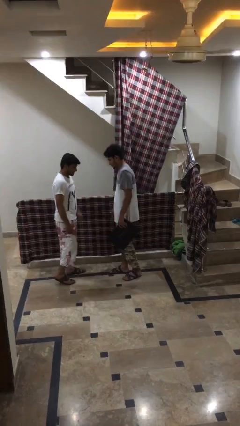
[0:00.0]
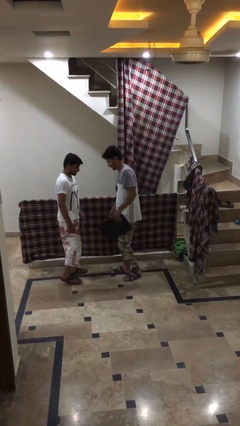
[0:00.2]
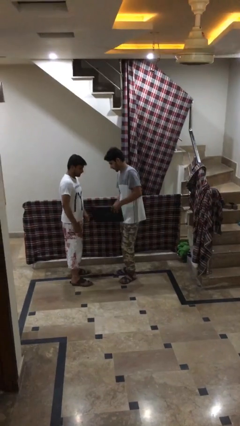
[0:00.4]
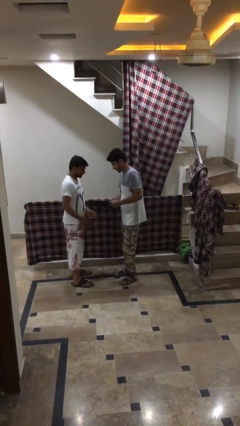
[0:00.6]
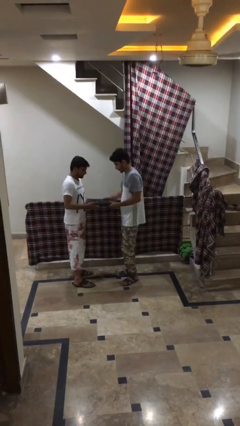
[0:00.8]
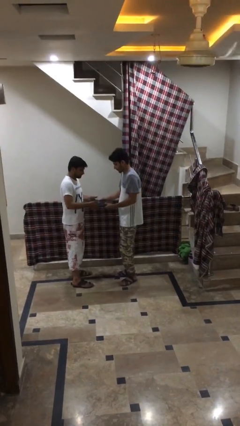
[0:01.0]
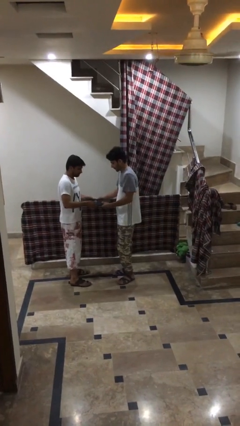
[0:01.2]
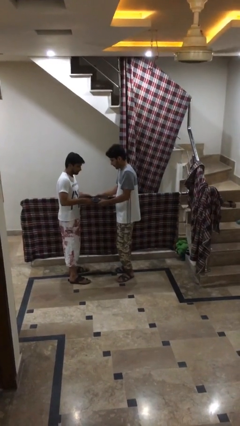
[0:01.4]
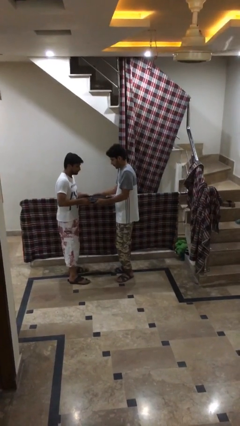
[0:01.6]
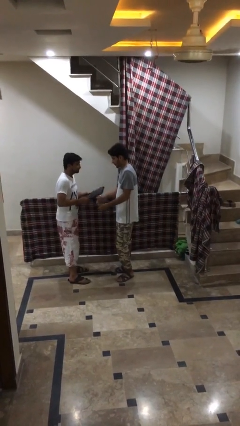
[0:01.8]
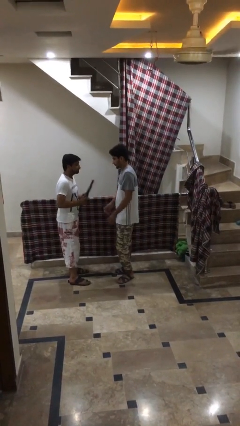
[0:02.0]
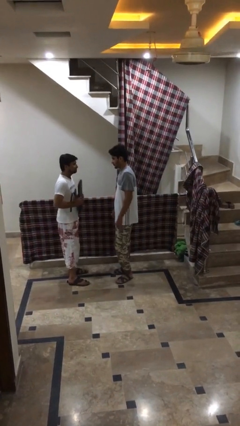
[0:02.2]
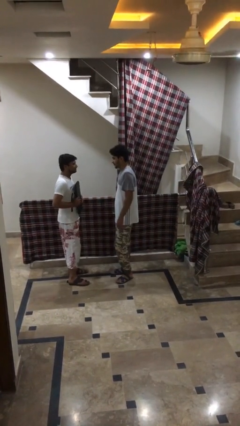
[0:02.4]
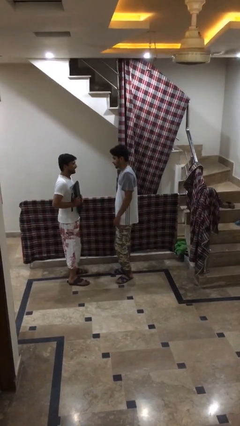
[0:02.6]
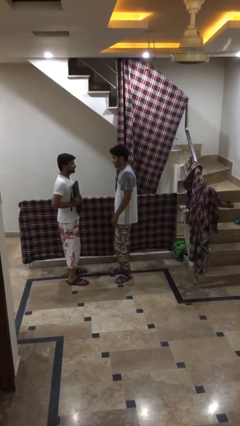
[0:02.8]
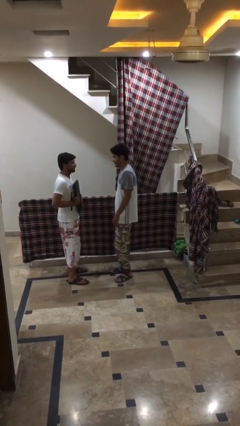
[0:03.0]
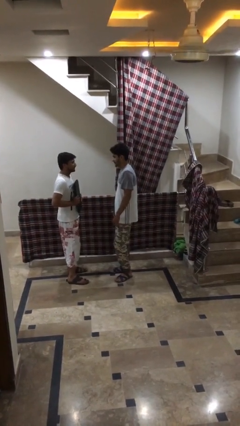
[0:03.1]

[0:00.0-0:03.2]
person transfers object to person

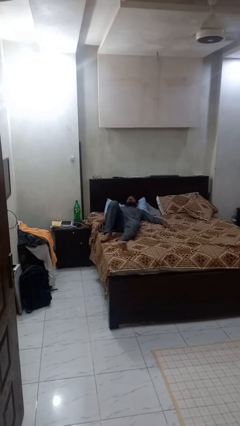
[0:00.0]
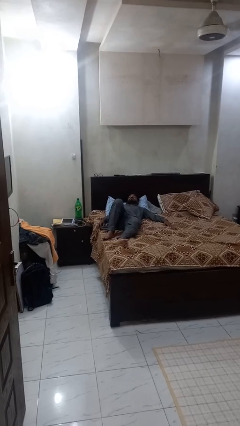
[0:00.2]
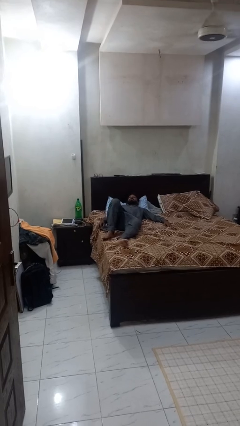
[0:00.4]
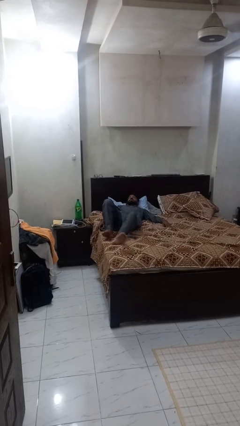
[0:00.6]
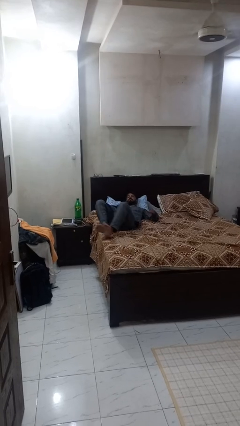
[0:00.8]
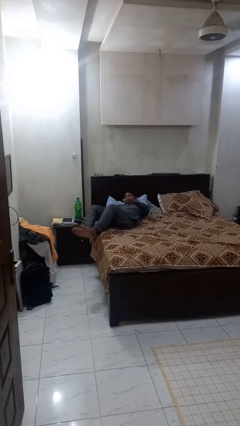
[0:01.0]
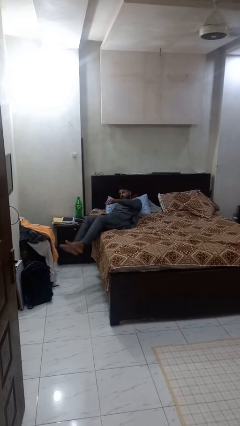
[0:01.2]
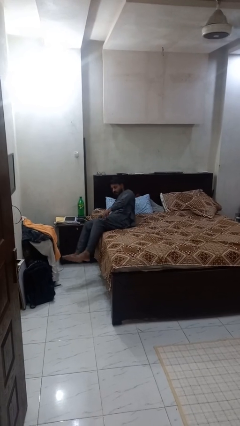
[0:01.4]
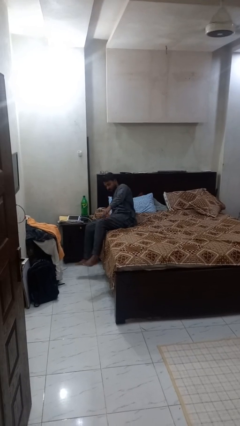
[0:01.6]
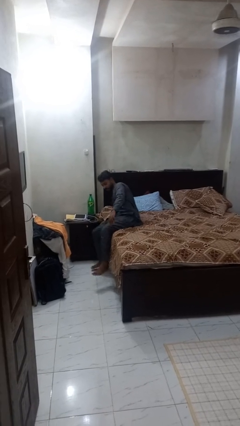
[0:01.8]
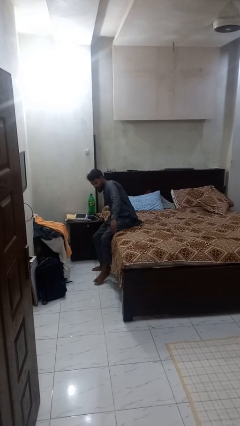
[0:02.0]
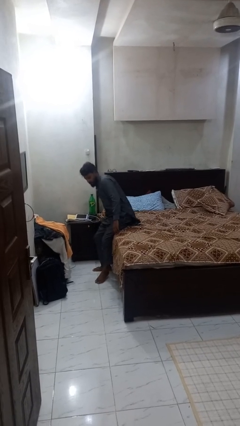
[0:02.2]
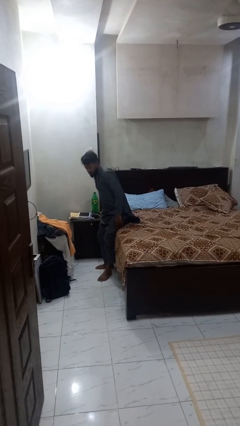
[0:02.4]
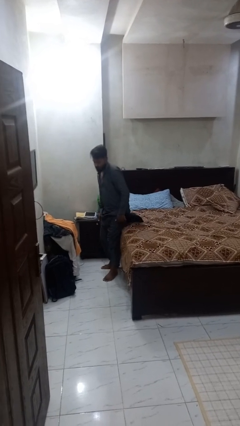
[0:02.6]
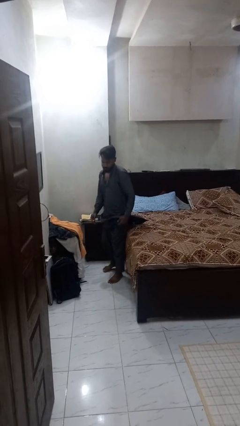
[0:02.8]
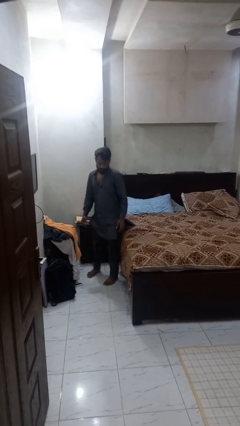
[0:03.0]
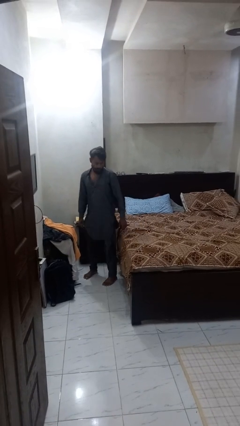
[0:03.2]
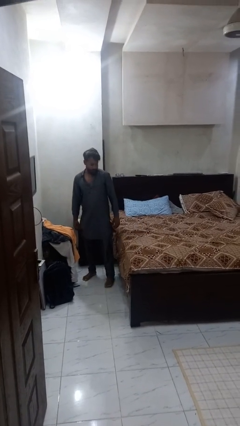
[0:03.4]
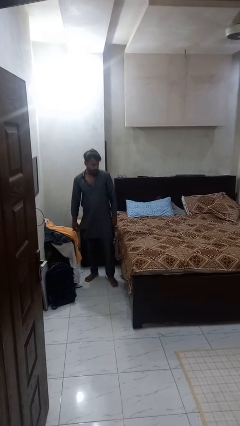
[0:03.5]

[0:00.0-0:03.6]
person stands up

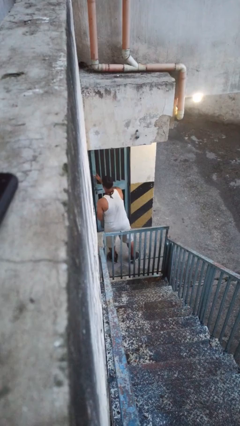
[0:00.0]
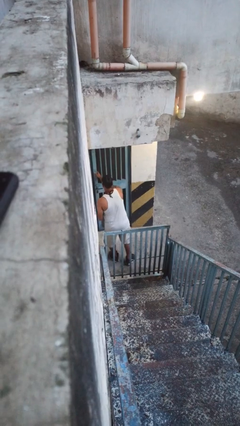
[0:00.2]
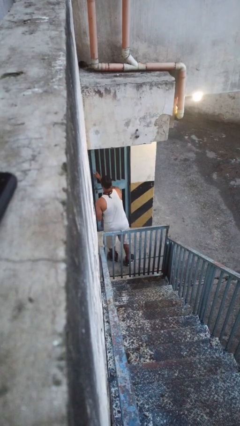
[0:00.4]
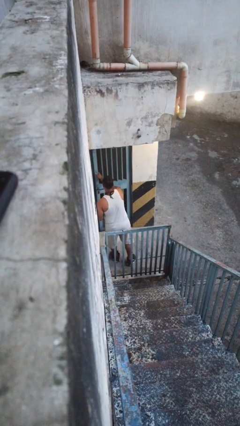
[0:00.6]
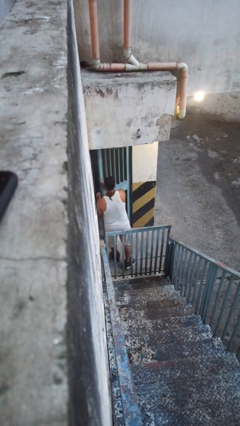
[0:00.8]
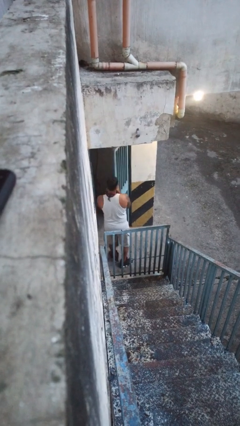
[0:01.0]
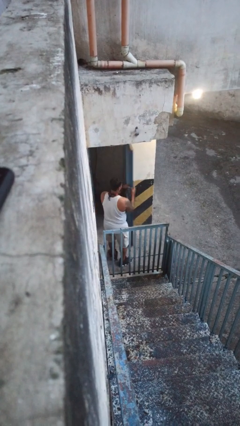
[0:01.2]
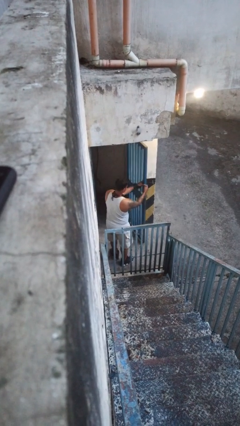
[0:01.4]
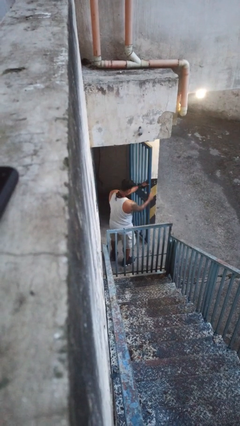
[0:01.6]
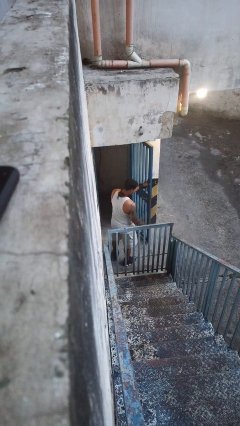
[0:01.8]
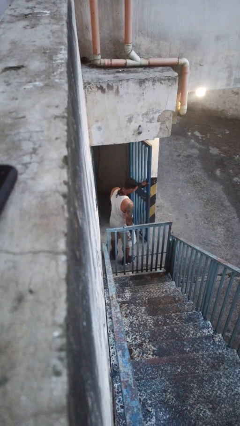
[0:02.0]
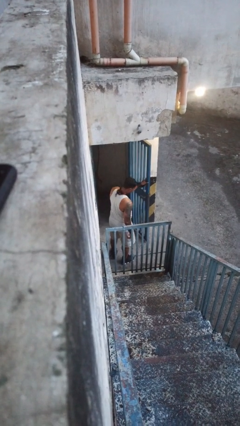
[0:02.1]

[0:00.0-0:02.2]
person opens facility door

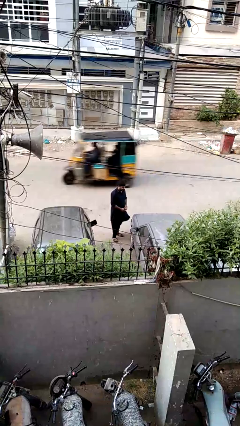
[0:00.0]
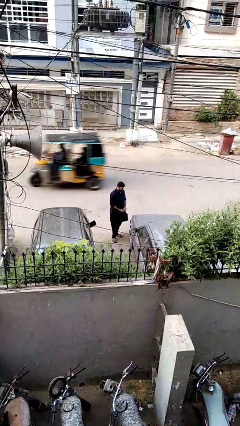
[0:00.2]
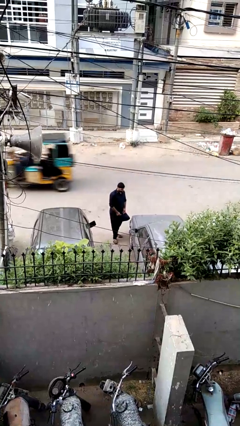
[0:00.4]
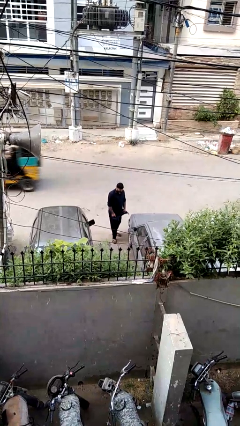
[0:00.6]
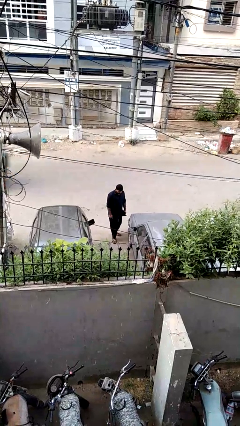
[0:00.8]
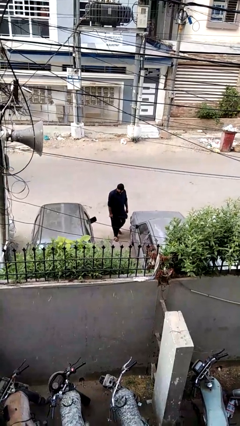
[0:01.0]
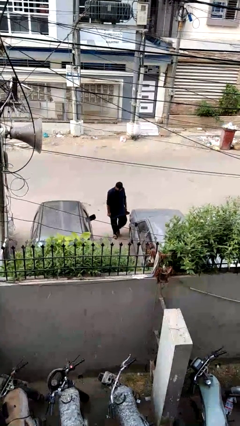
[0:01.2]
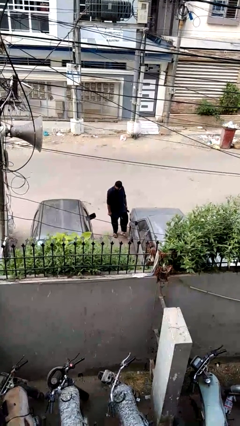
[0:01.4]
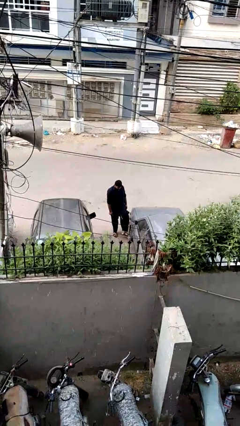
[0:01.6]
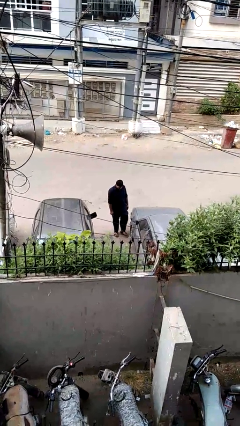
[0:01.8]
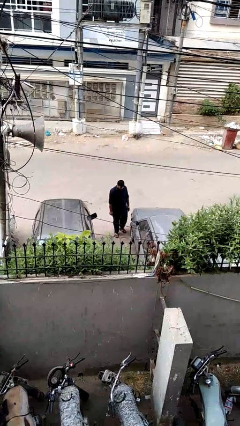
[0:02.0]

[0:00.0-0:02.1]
person kicks car tires

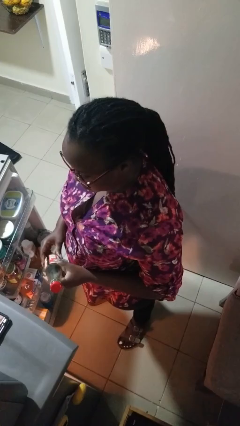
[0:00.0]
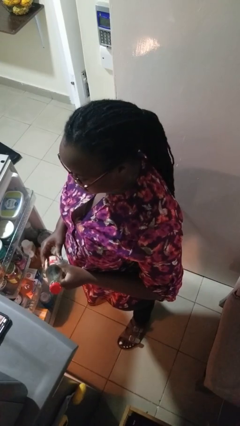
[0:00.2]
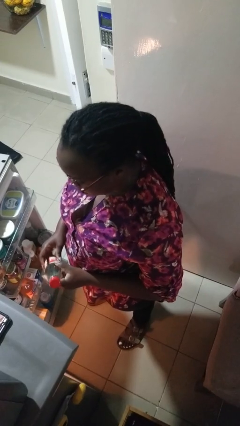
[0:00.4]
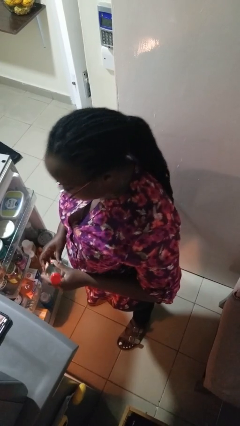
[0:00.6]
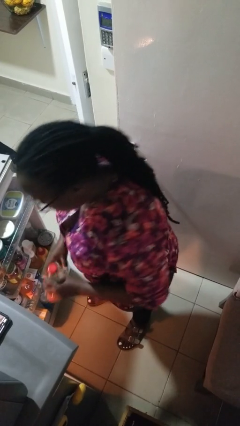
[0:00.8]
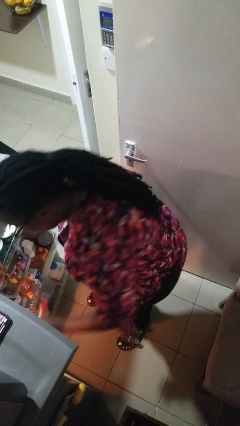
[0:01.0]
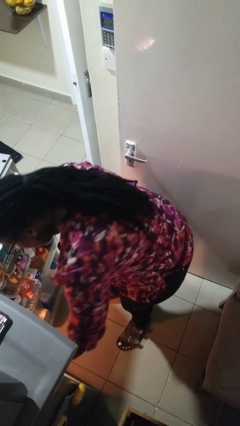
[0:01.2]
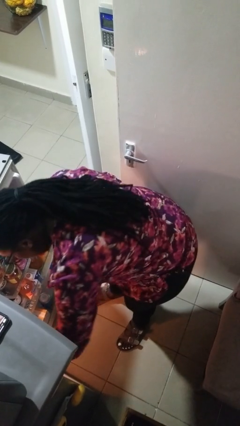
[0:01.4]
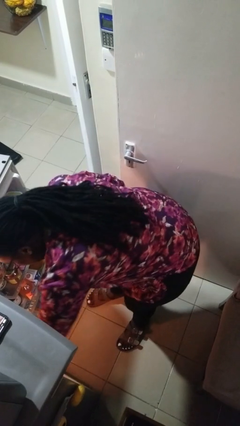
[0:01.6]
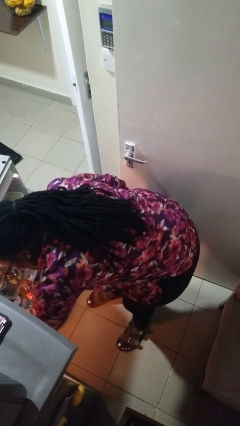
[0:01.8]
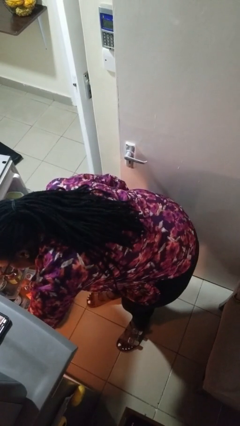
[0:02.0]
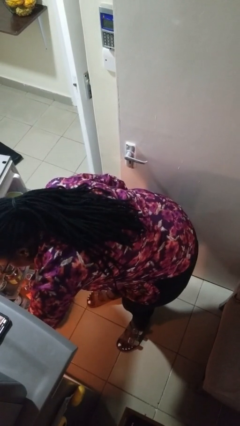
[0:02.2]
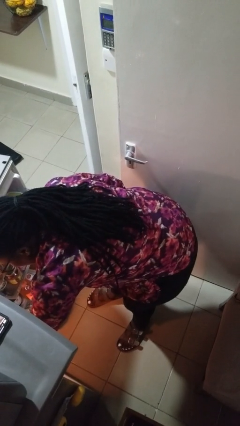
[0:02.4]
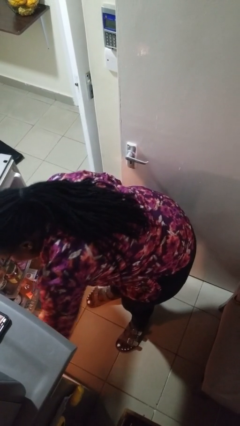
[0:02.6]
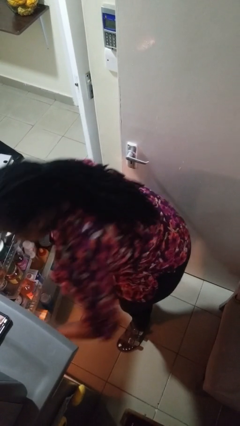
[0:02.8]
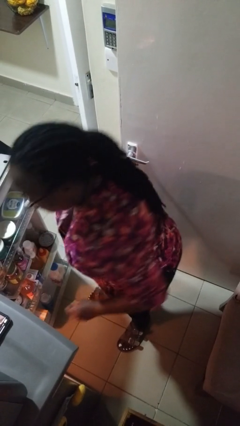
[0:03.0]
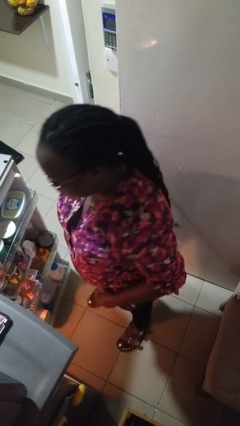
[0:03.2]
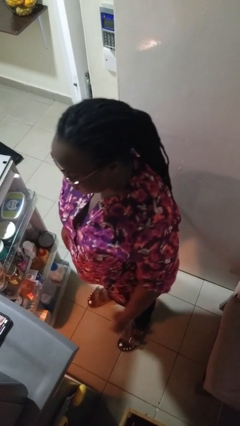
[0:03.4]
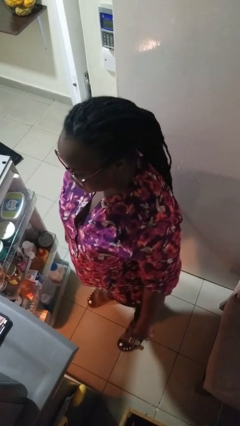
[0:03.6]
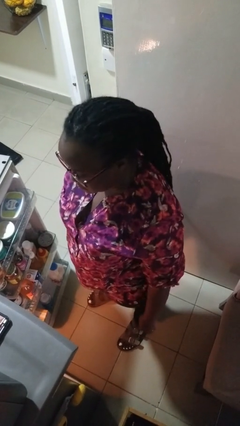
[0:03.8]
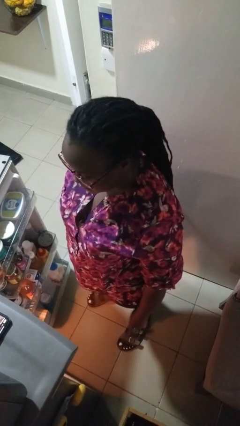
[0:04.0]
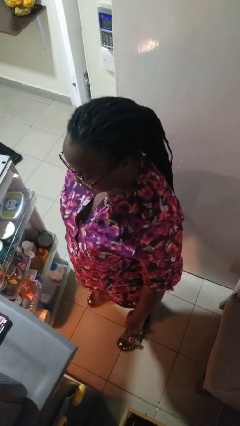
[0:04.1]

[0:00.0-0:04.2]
person puts object into refrigerator

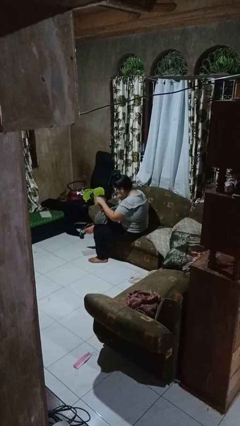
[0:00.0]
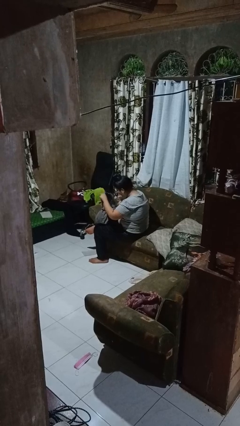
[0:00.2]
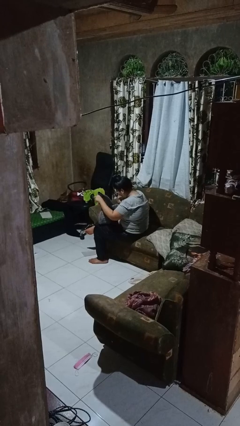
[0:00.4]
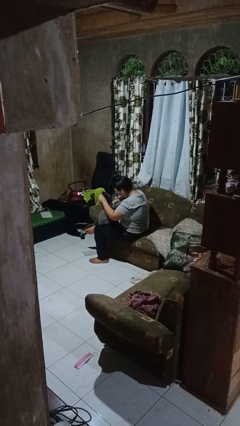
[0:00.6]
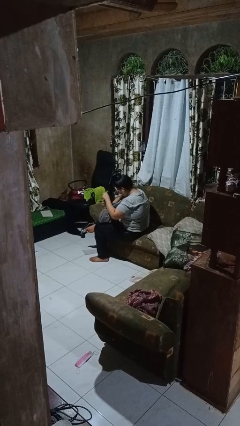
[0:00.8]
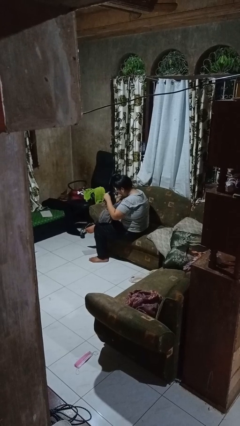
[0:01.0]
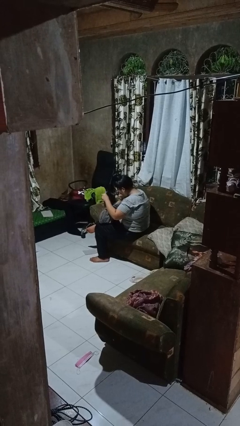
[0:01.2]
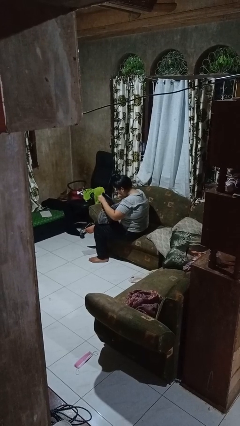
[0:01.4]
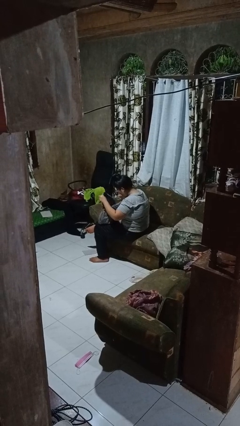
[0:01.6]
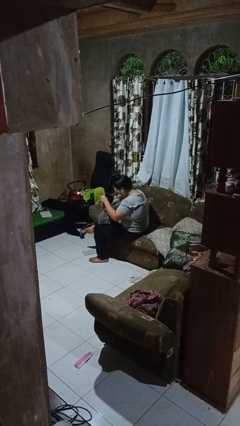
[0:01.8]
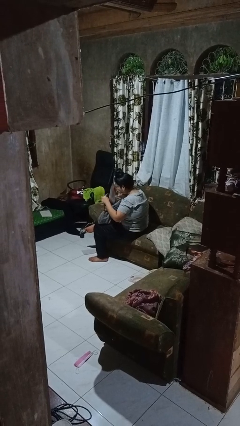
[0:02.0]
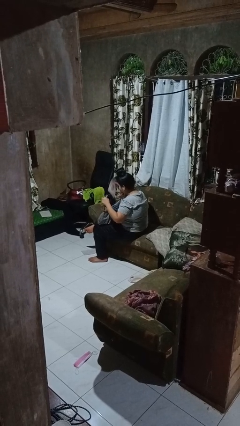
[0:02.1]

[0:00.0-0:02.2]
person searches in backpack
